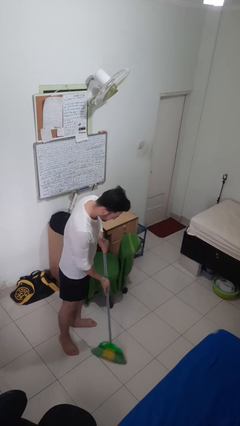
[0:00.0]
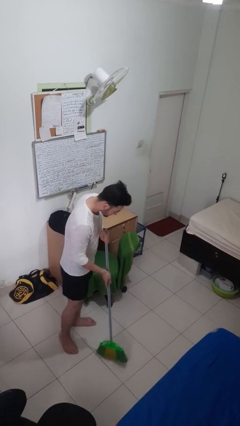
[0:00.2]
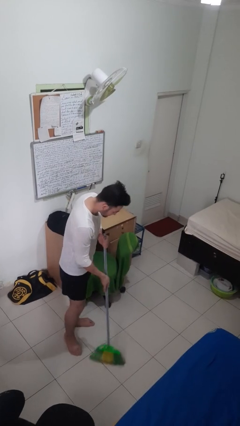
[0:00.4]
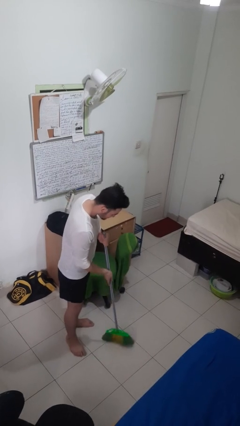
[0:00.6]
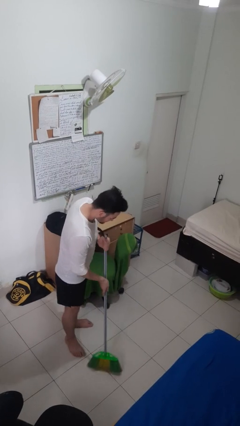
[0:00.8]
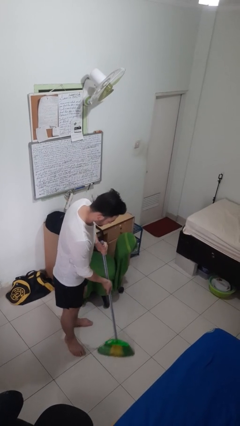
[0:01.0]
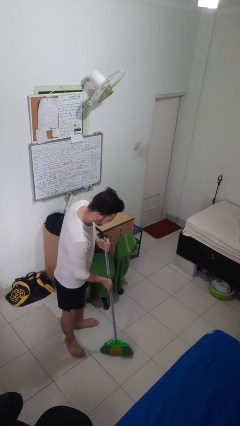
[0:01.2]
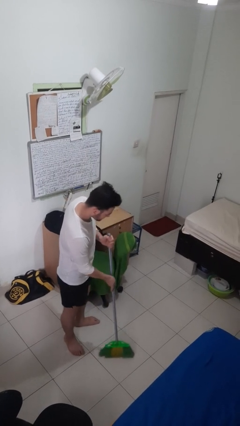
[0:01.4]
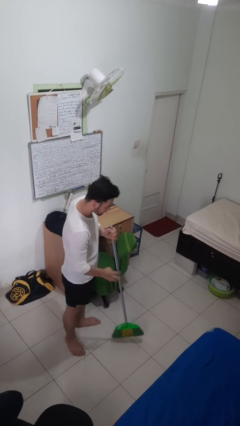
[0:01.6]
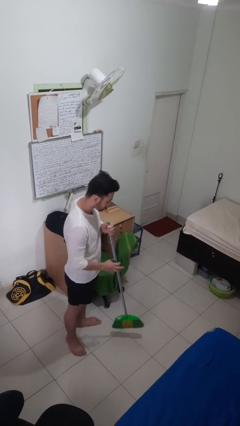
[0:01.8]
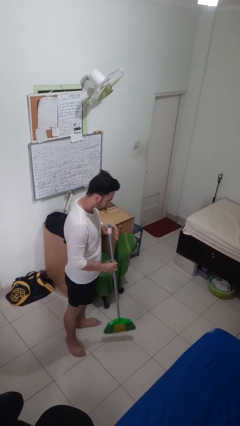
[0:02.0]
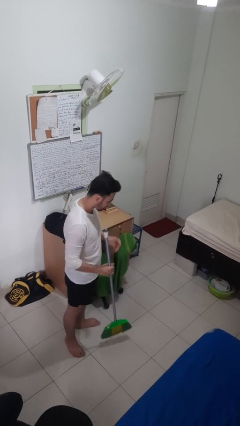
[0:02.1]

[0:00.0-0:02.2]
person sweeps floor

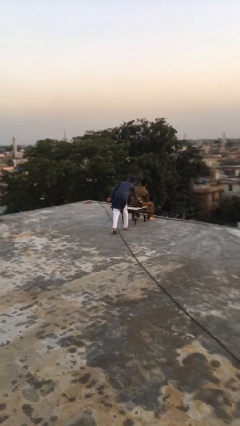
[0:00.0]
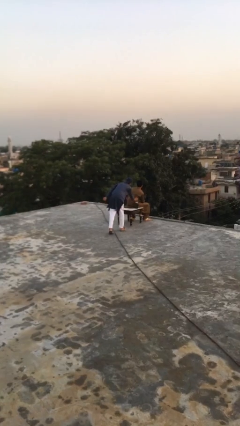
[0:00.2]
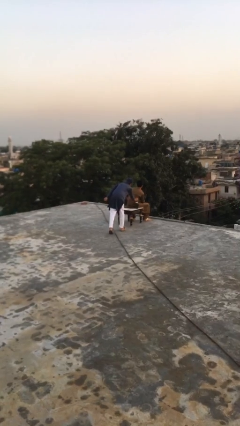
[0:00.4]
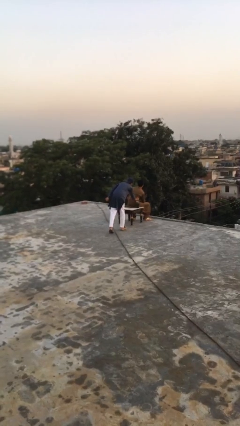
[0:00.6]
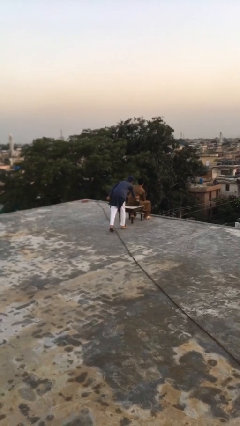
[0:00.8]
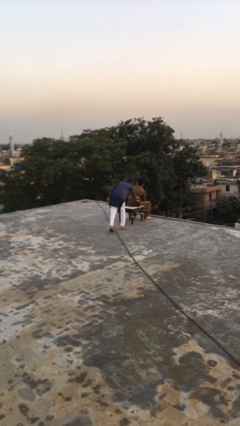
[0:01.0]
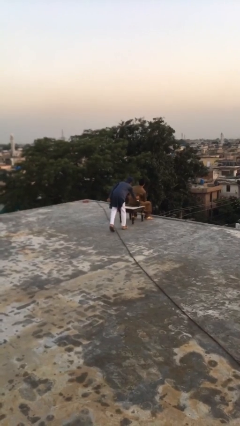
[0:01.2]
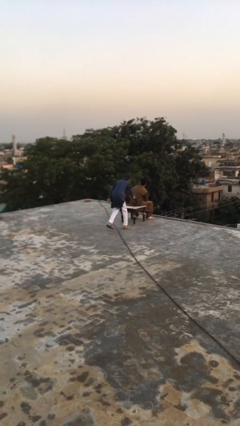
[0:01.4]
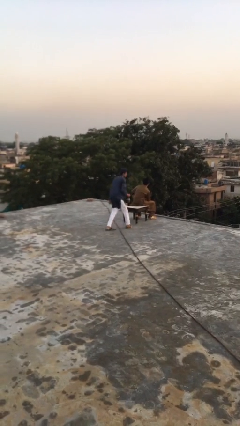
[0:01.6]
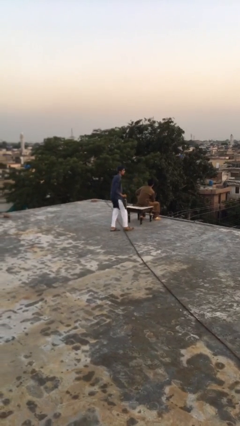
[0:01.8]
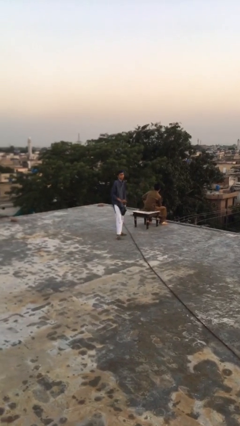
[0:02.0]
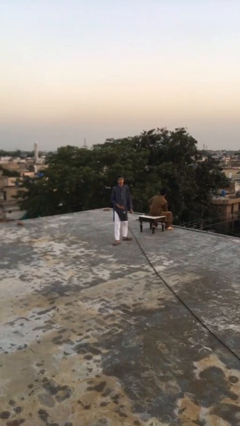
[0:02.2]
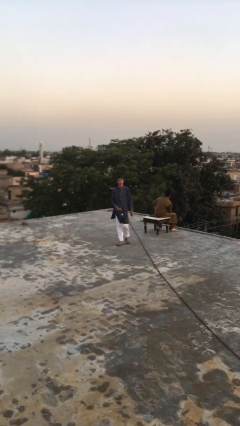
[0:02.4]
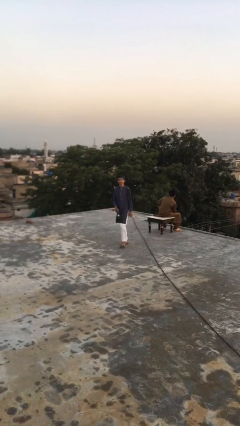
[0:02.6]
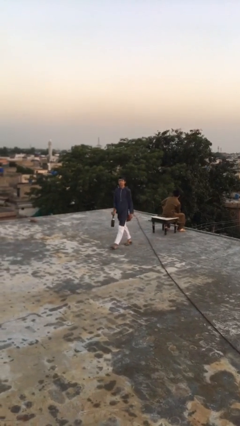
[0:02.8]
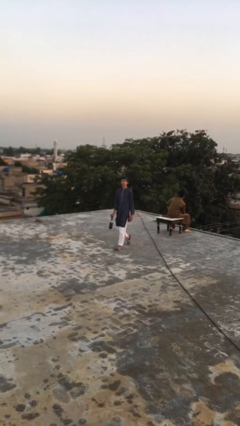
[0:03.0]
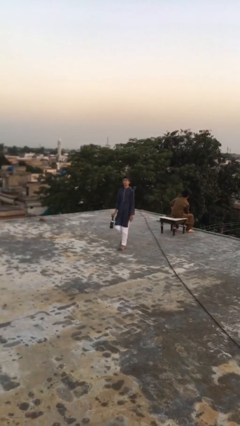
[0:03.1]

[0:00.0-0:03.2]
person steals object from person

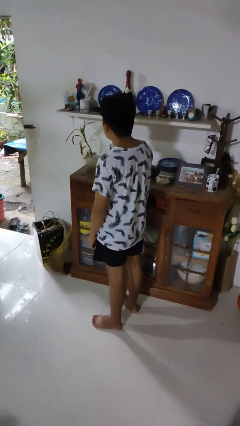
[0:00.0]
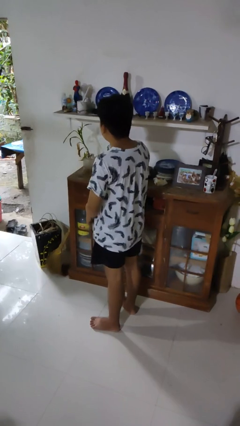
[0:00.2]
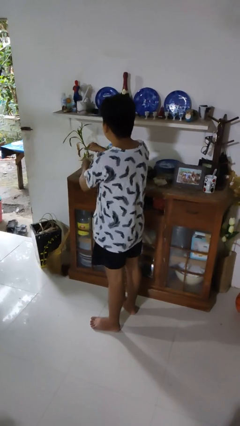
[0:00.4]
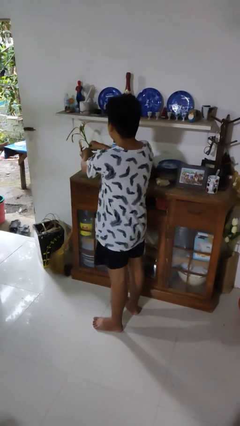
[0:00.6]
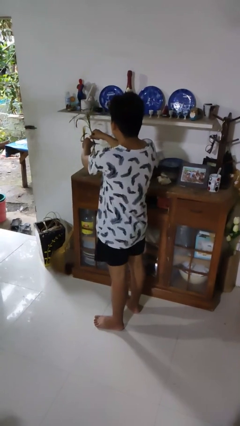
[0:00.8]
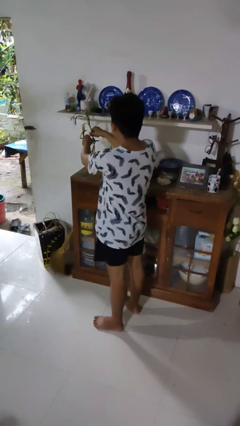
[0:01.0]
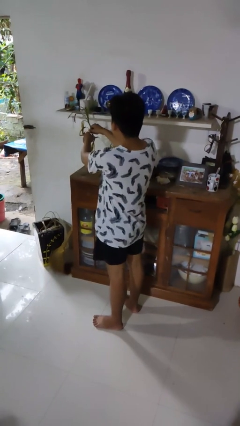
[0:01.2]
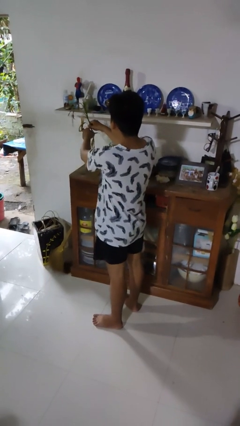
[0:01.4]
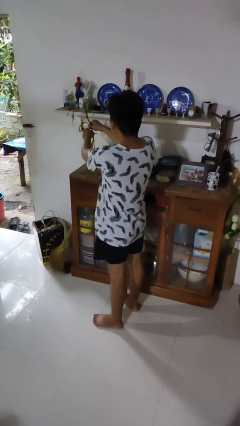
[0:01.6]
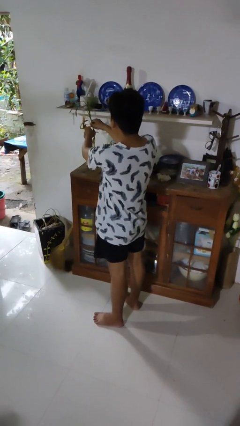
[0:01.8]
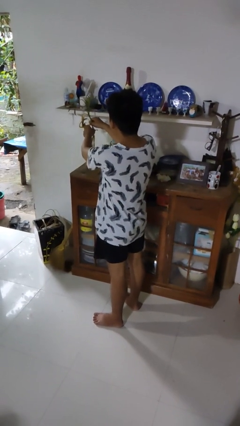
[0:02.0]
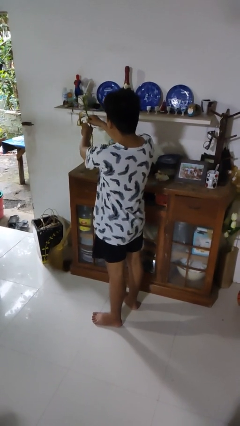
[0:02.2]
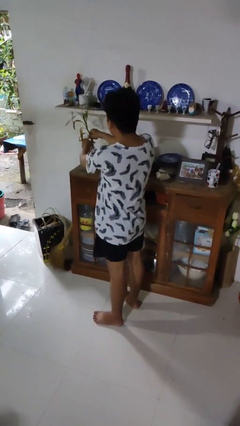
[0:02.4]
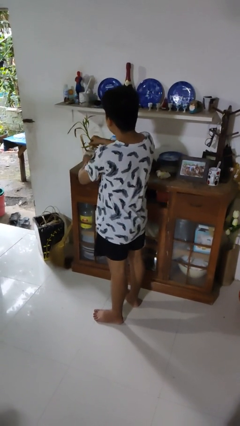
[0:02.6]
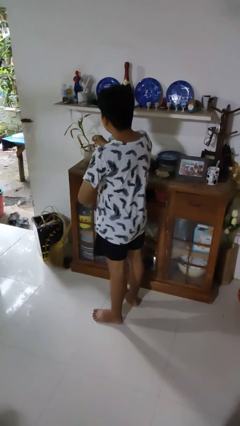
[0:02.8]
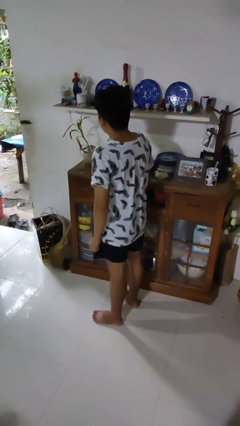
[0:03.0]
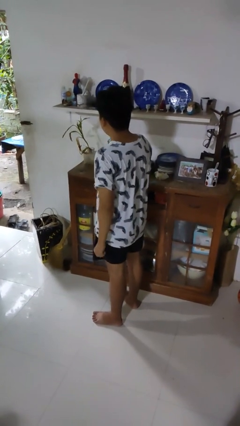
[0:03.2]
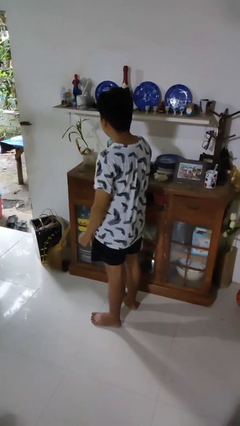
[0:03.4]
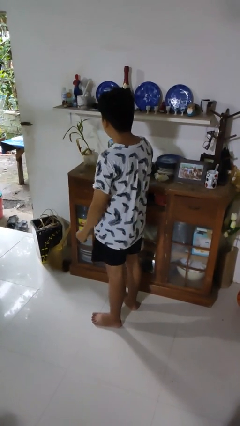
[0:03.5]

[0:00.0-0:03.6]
person arranges flowers in vase

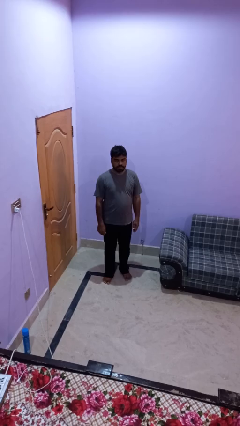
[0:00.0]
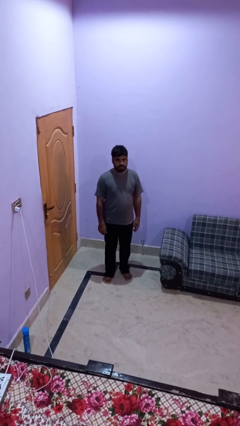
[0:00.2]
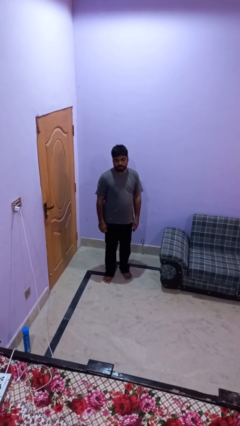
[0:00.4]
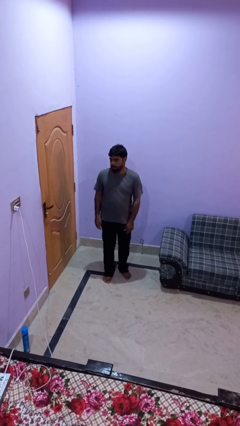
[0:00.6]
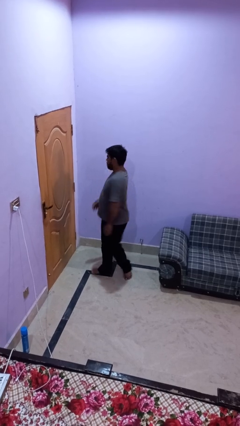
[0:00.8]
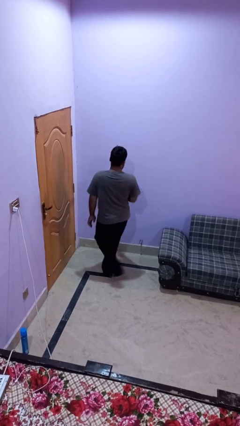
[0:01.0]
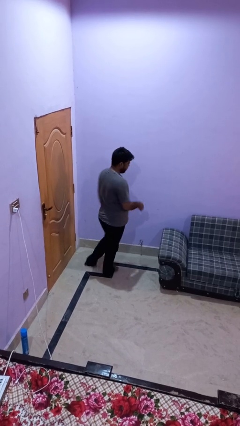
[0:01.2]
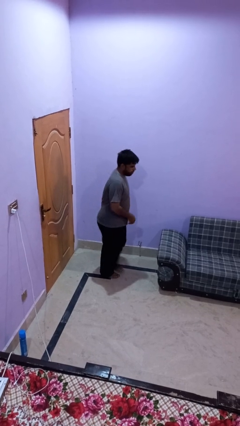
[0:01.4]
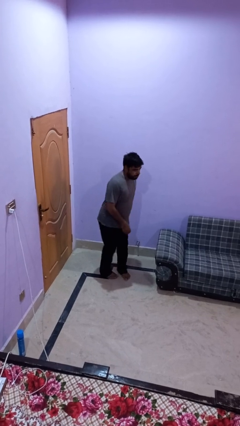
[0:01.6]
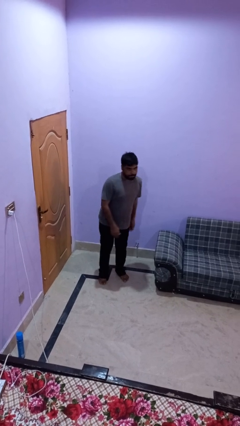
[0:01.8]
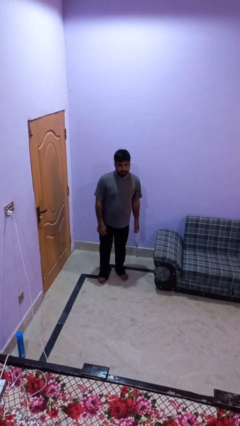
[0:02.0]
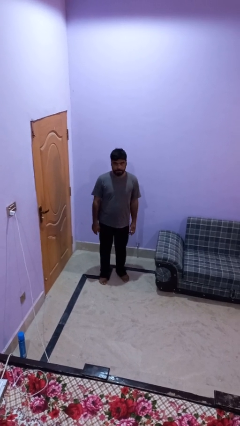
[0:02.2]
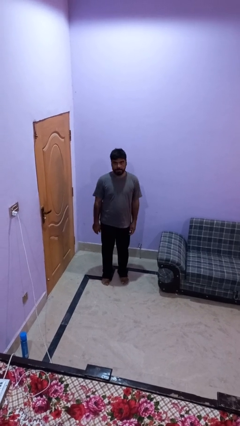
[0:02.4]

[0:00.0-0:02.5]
person twirls

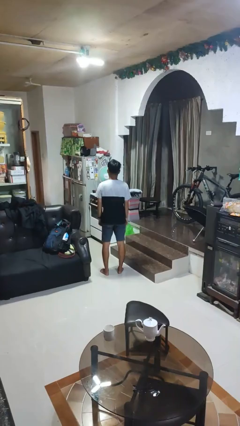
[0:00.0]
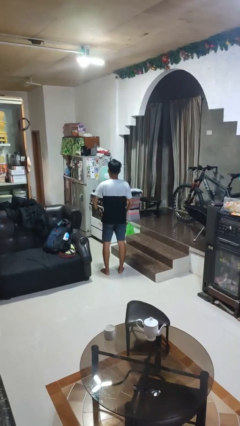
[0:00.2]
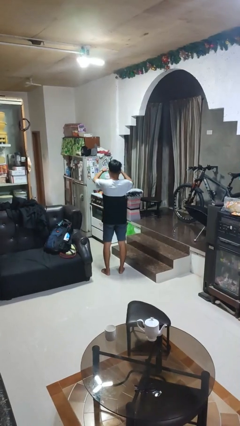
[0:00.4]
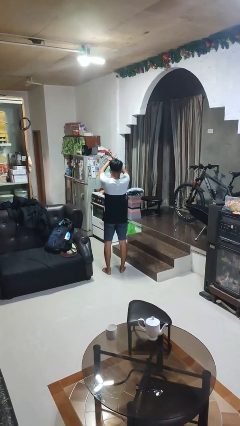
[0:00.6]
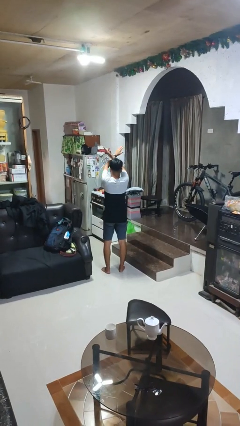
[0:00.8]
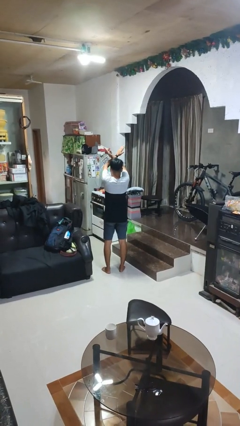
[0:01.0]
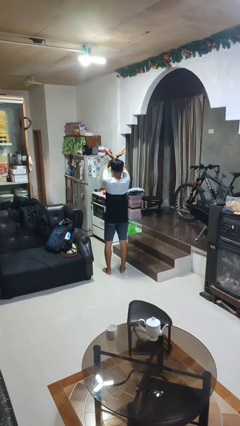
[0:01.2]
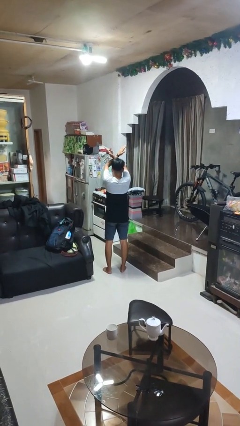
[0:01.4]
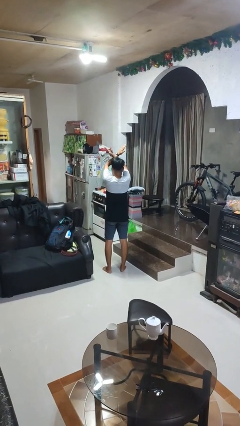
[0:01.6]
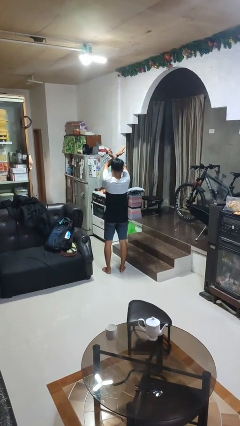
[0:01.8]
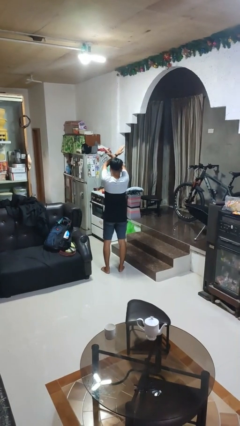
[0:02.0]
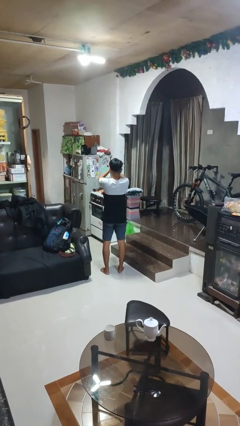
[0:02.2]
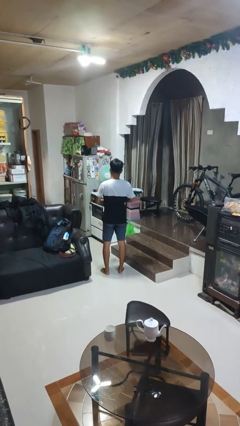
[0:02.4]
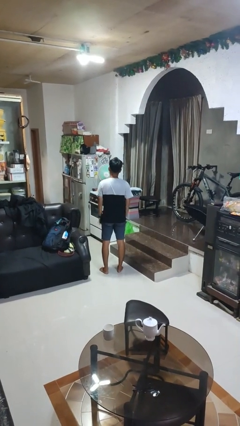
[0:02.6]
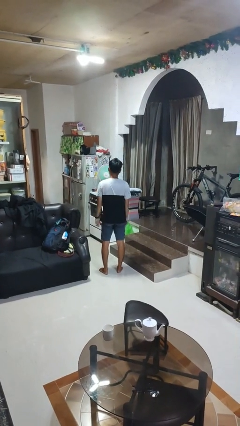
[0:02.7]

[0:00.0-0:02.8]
person gestures arms x

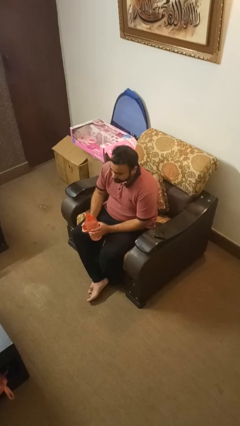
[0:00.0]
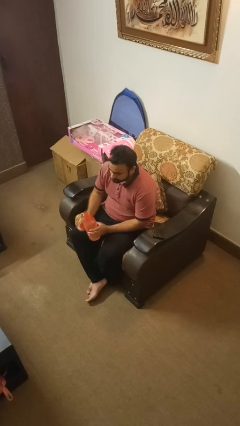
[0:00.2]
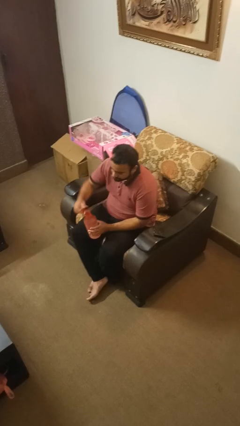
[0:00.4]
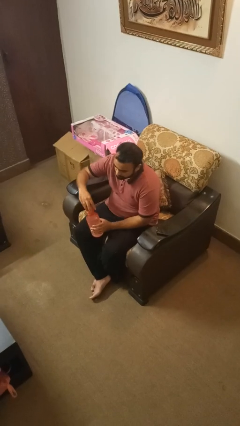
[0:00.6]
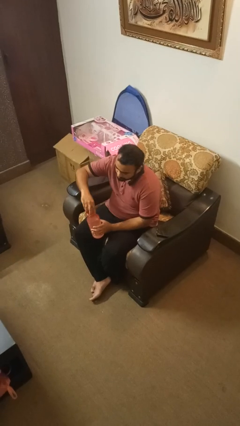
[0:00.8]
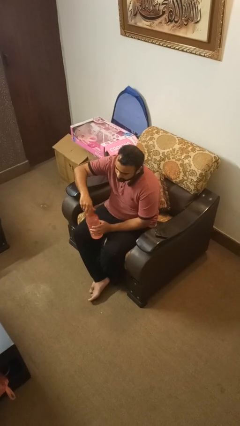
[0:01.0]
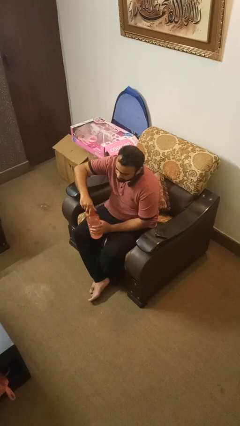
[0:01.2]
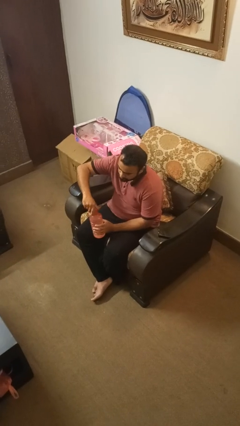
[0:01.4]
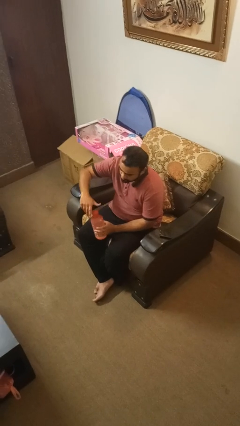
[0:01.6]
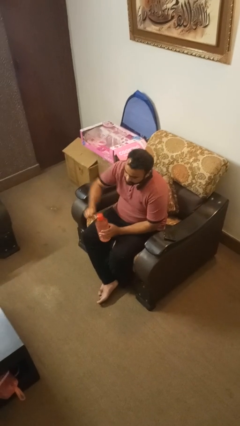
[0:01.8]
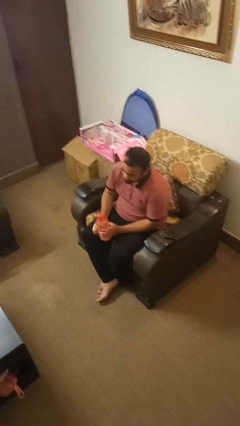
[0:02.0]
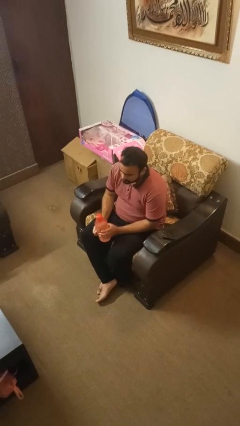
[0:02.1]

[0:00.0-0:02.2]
person screws lid to bottle

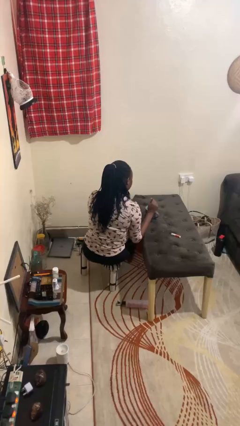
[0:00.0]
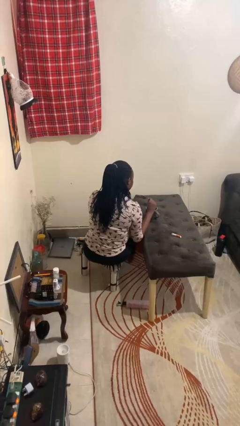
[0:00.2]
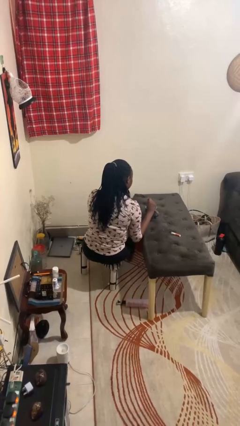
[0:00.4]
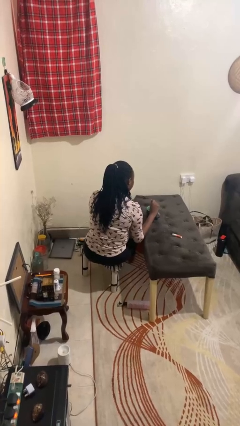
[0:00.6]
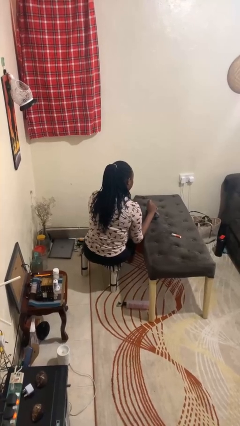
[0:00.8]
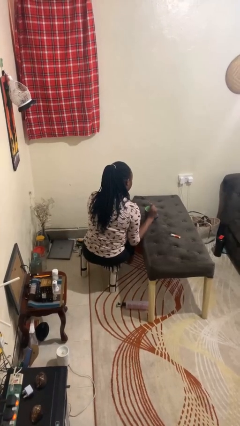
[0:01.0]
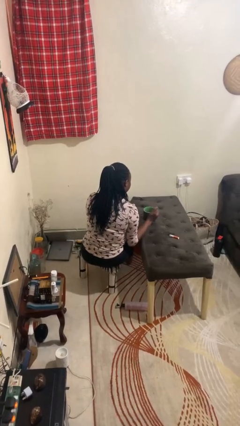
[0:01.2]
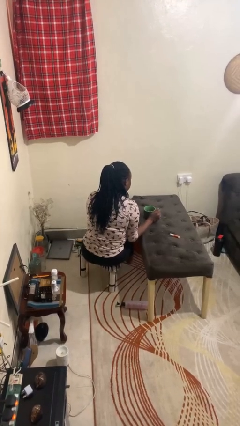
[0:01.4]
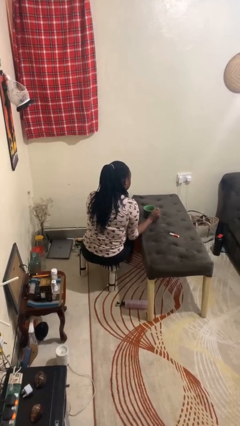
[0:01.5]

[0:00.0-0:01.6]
person stirs mug
